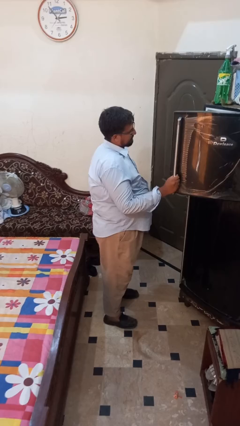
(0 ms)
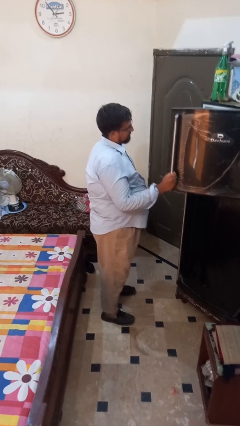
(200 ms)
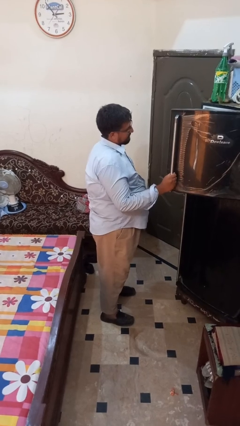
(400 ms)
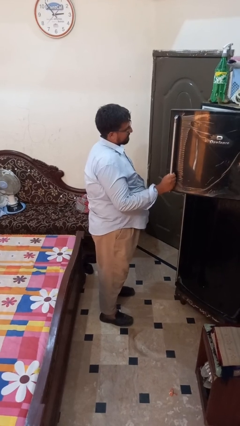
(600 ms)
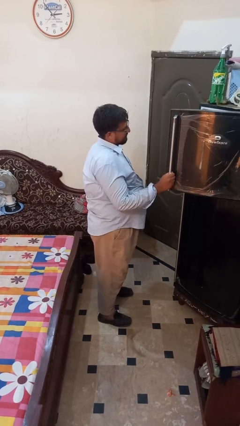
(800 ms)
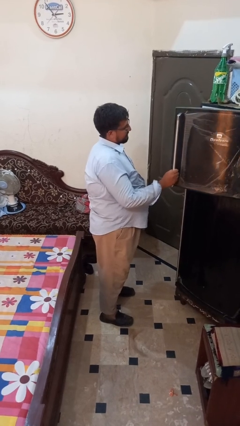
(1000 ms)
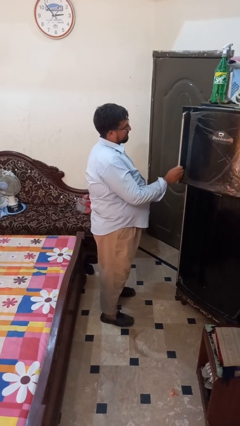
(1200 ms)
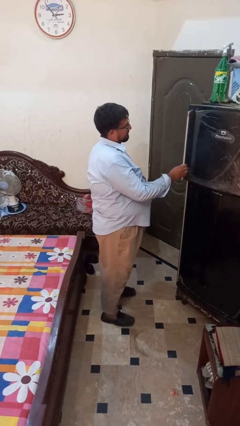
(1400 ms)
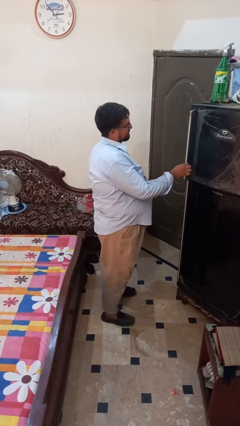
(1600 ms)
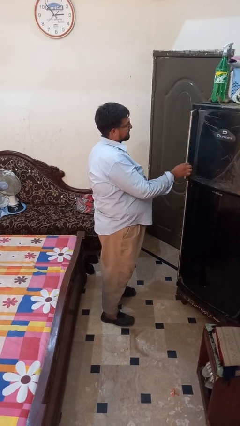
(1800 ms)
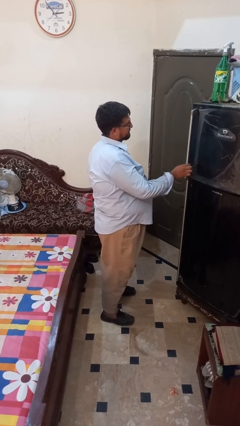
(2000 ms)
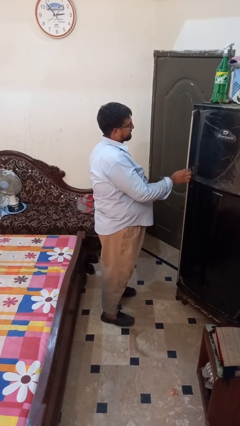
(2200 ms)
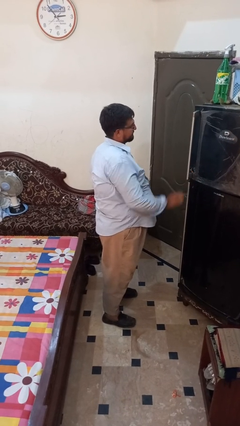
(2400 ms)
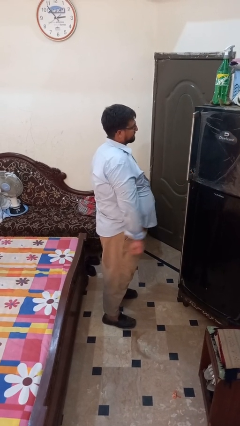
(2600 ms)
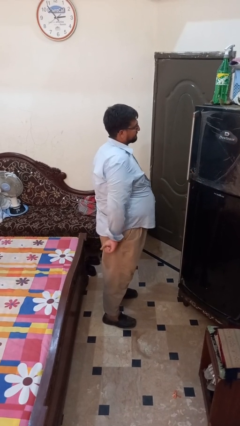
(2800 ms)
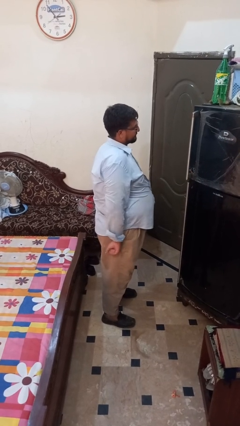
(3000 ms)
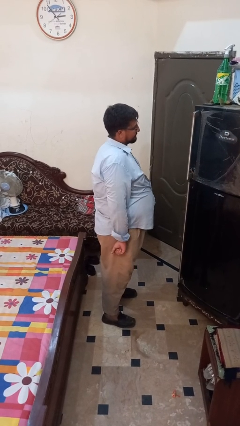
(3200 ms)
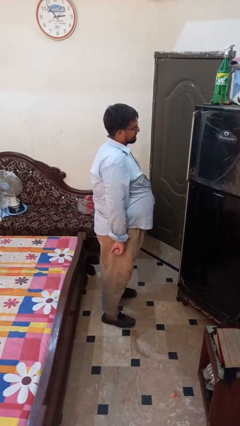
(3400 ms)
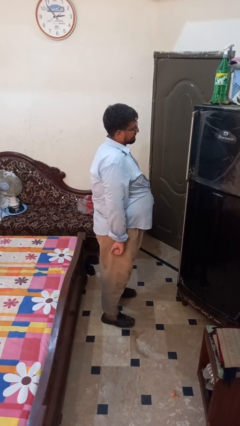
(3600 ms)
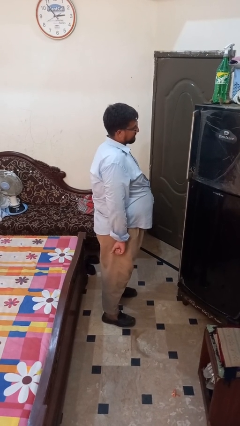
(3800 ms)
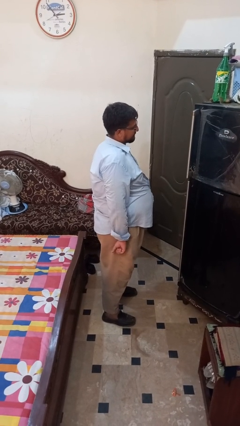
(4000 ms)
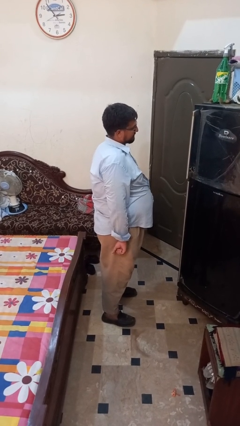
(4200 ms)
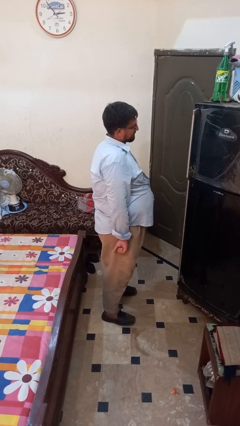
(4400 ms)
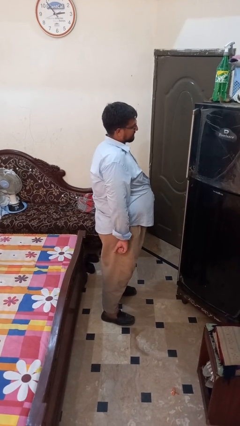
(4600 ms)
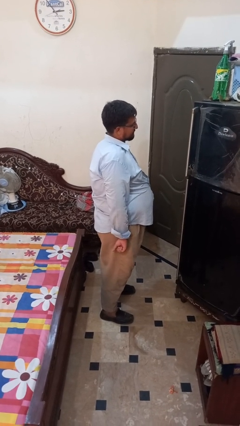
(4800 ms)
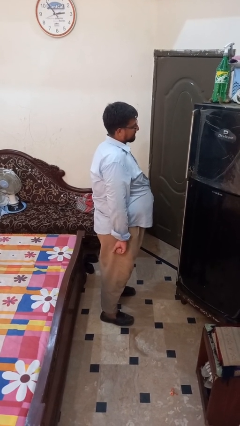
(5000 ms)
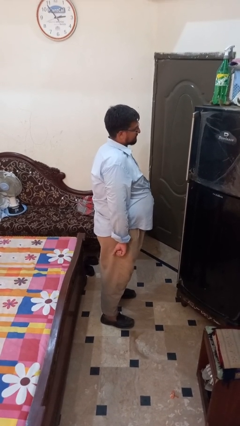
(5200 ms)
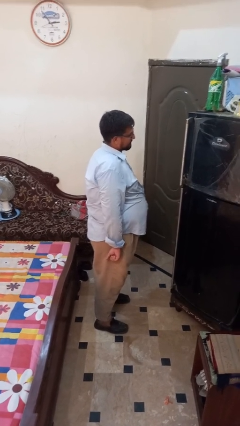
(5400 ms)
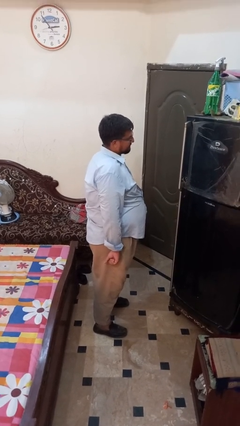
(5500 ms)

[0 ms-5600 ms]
person closes refrigerator

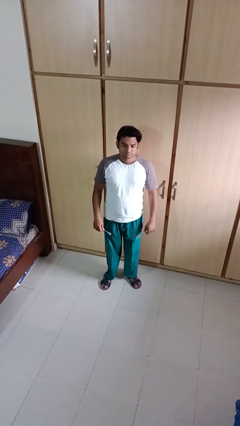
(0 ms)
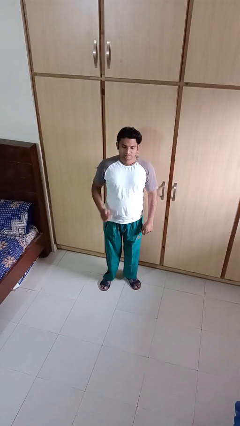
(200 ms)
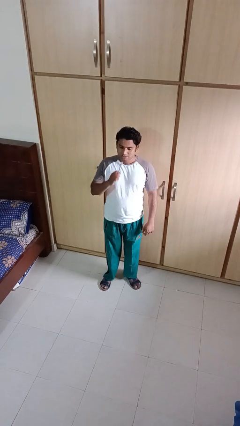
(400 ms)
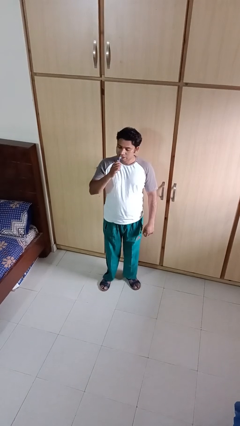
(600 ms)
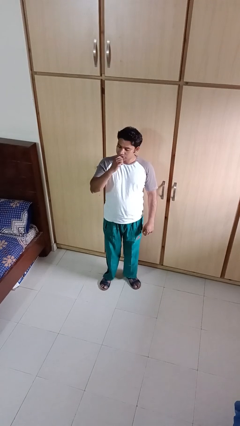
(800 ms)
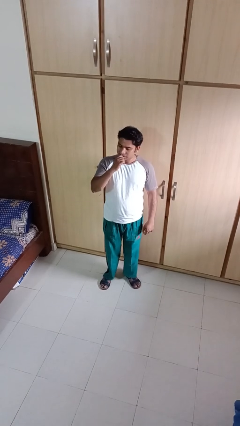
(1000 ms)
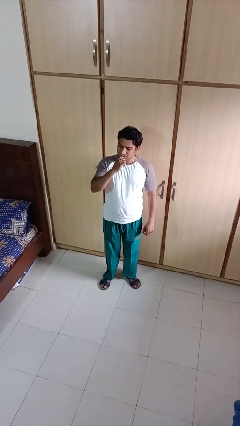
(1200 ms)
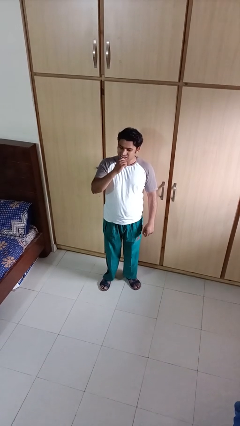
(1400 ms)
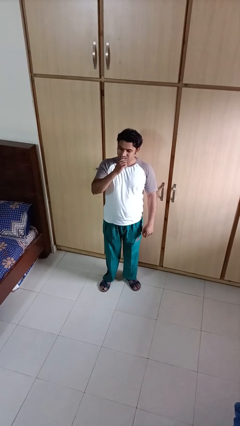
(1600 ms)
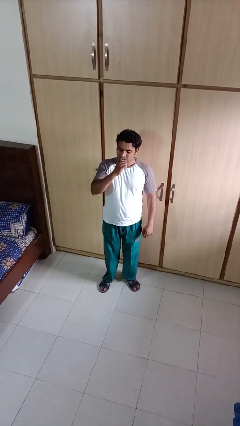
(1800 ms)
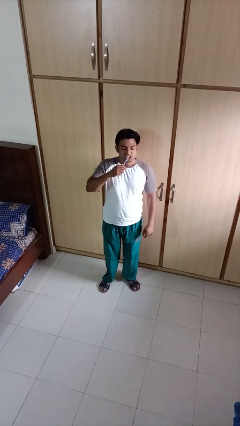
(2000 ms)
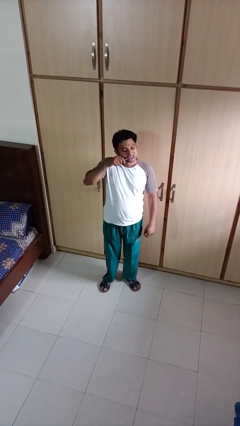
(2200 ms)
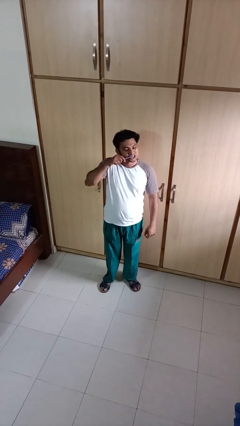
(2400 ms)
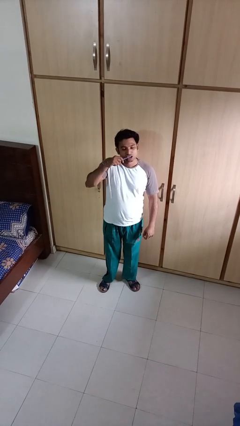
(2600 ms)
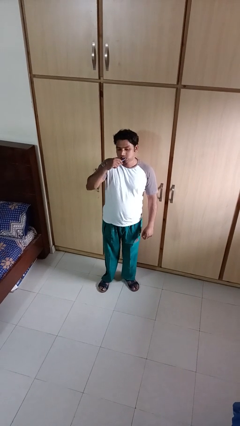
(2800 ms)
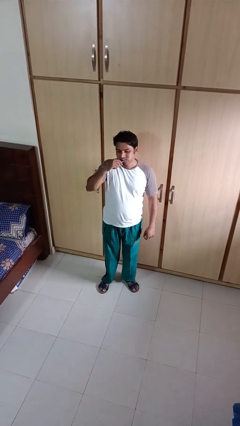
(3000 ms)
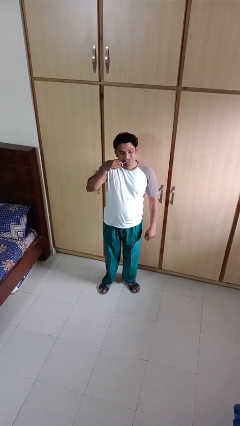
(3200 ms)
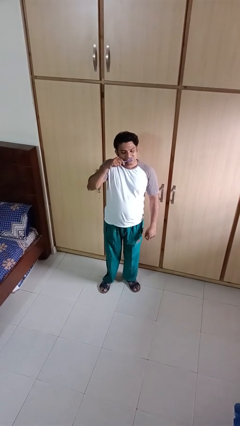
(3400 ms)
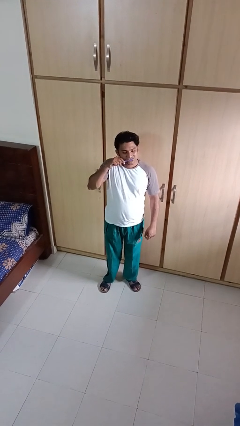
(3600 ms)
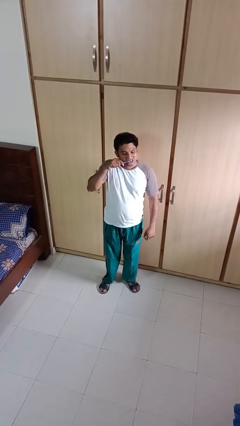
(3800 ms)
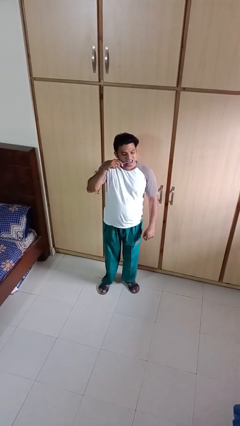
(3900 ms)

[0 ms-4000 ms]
person brushes teeth

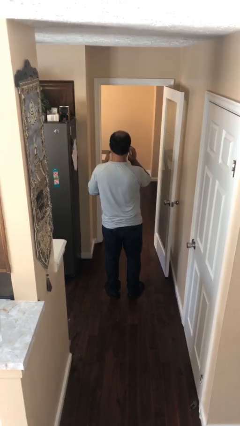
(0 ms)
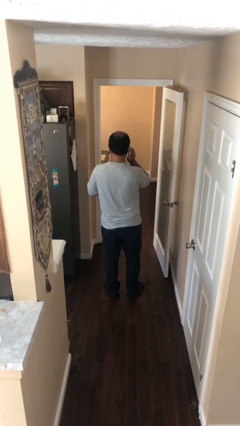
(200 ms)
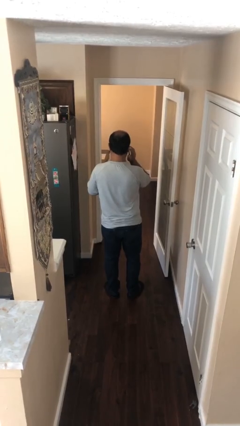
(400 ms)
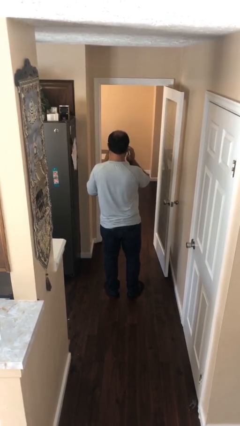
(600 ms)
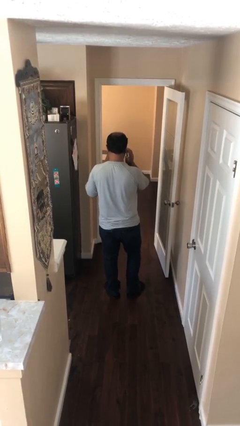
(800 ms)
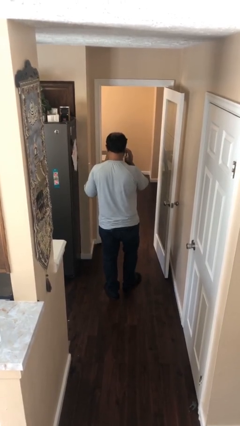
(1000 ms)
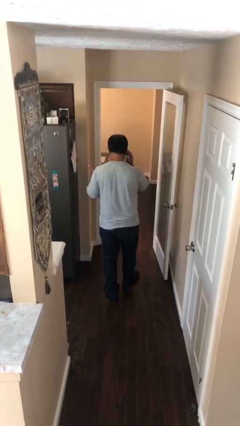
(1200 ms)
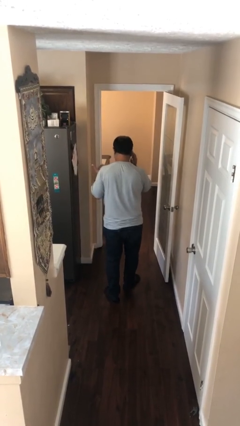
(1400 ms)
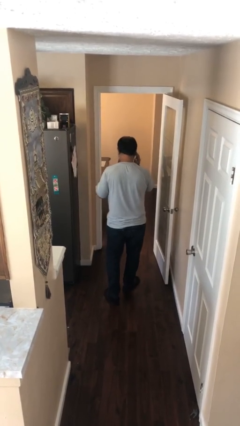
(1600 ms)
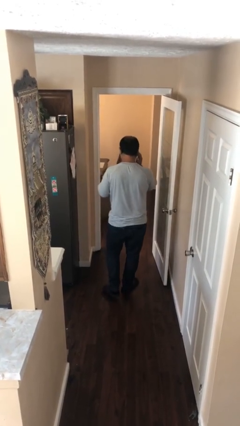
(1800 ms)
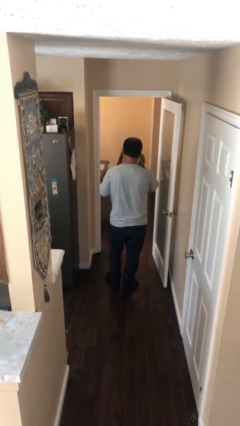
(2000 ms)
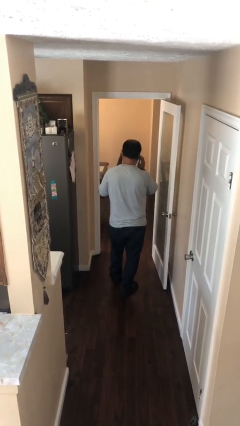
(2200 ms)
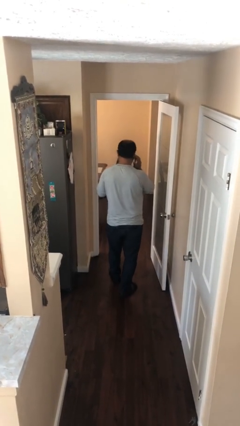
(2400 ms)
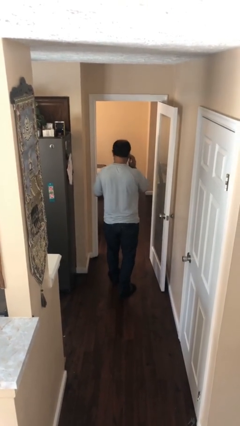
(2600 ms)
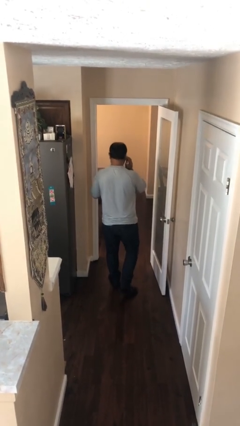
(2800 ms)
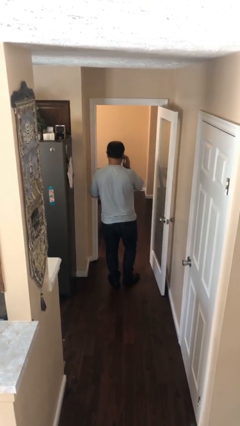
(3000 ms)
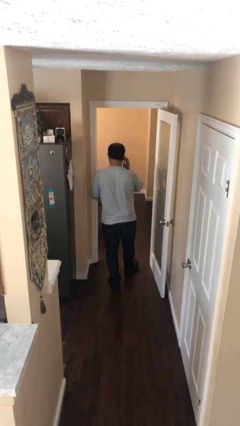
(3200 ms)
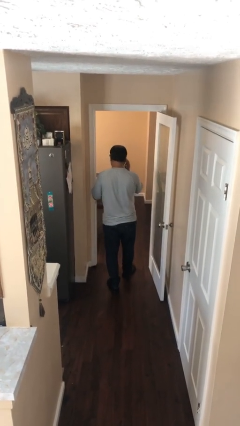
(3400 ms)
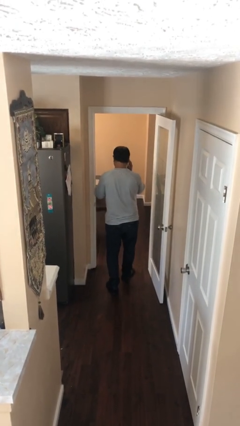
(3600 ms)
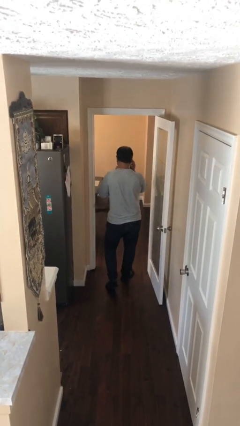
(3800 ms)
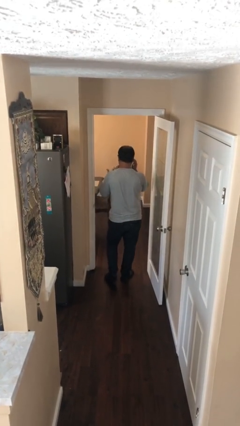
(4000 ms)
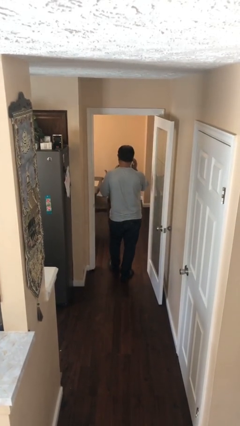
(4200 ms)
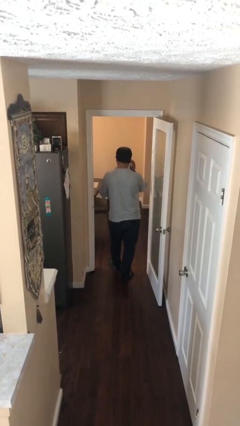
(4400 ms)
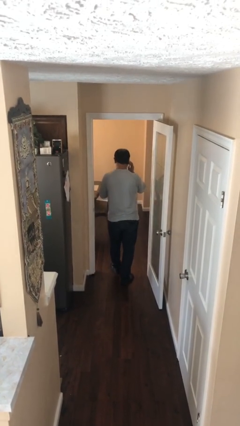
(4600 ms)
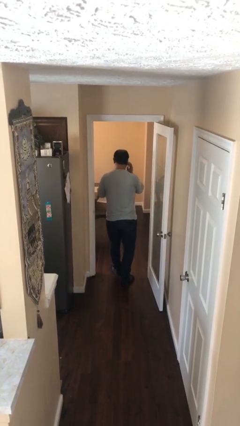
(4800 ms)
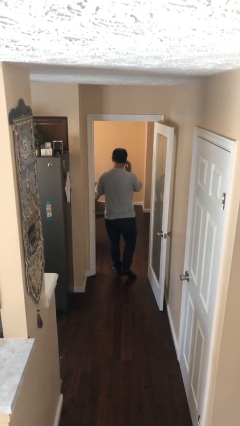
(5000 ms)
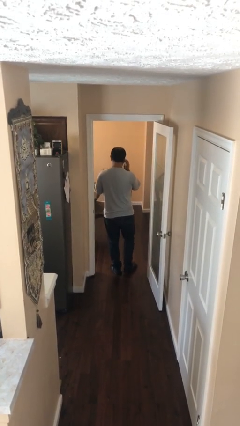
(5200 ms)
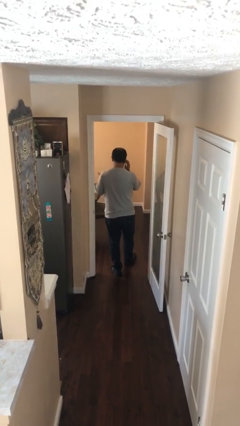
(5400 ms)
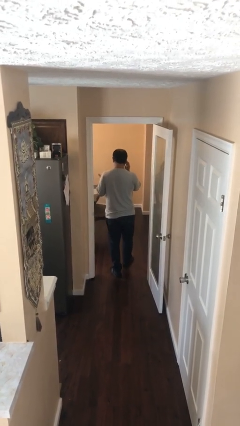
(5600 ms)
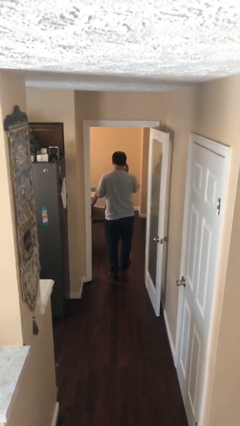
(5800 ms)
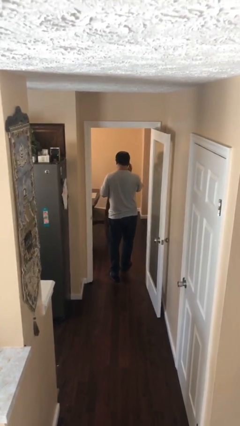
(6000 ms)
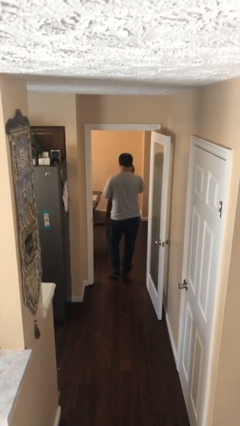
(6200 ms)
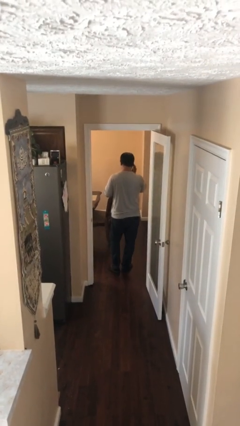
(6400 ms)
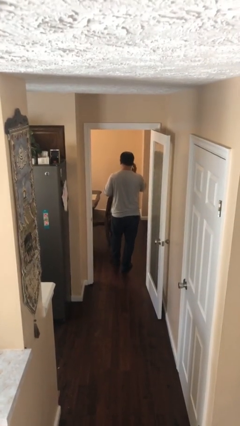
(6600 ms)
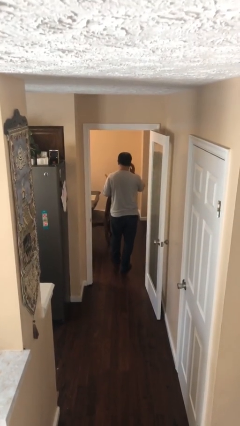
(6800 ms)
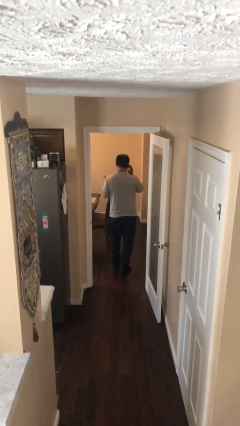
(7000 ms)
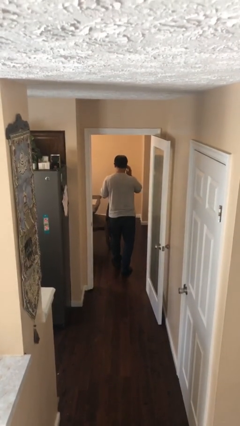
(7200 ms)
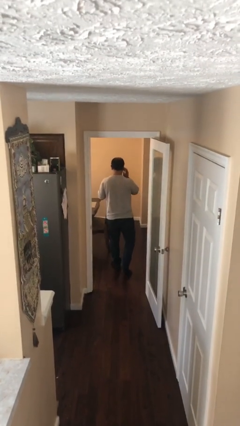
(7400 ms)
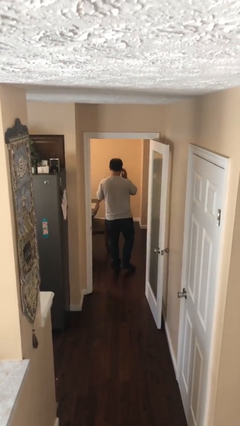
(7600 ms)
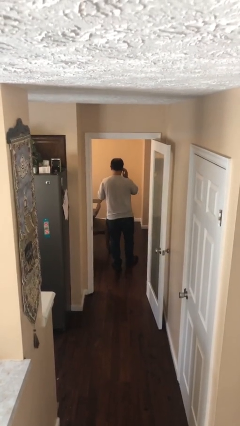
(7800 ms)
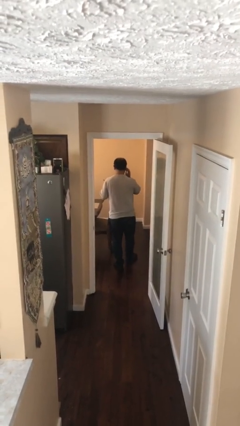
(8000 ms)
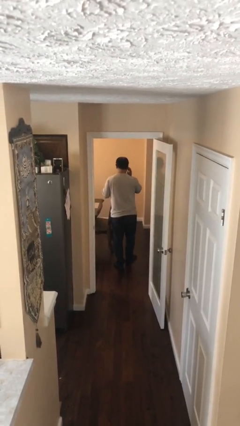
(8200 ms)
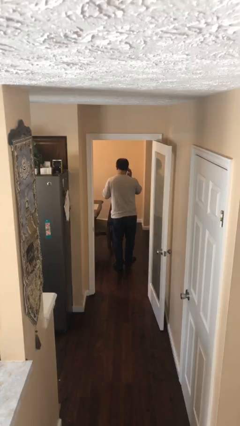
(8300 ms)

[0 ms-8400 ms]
person exits scene through structure

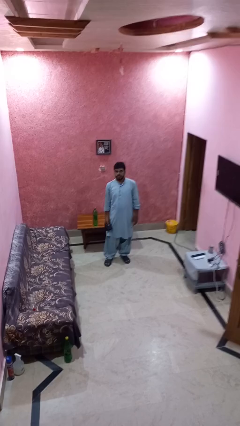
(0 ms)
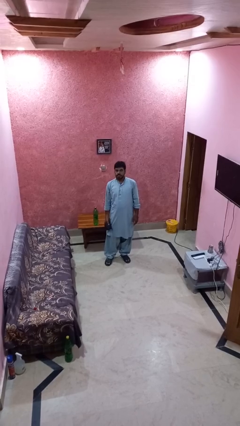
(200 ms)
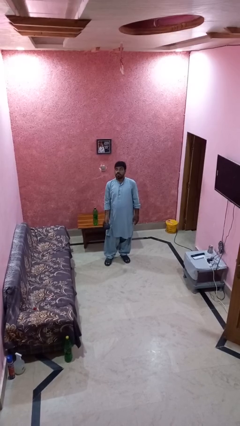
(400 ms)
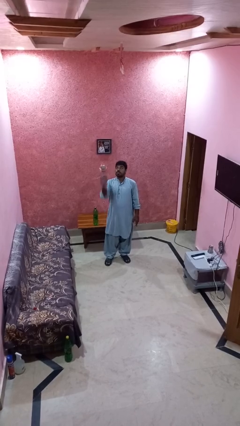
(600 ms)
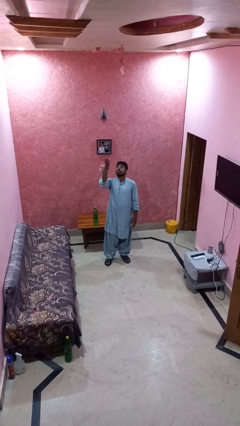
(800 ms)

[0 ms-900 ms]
person drops object
